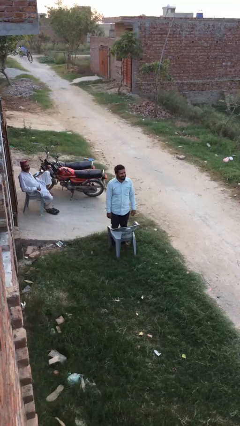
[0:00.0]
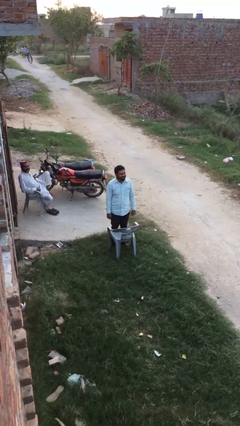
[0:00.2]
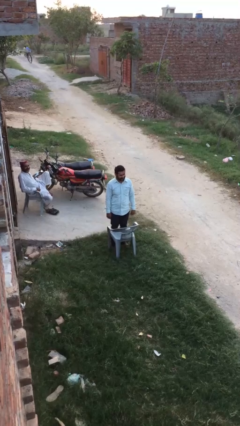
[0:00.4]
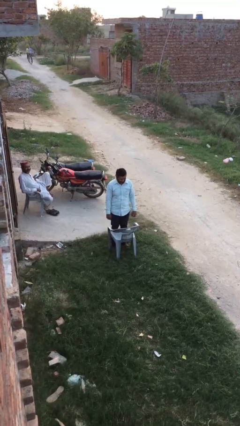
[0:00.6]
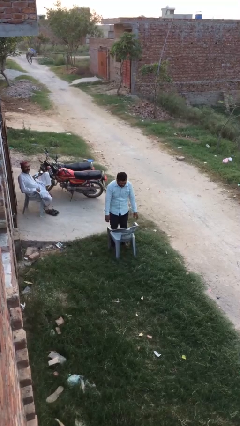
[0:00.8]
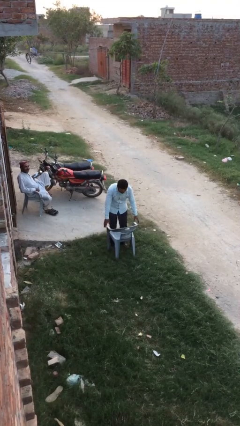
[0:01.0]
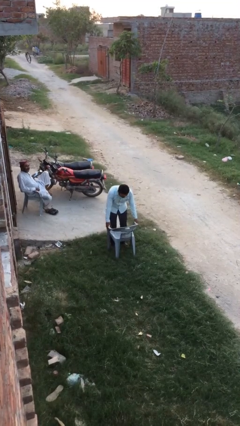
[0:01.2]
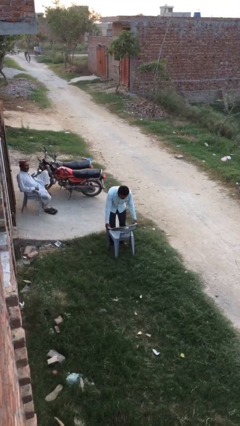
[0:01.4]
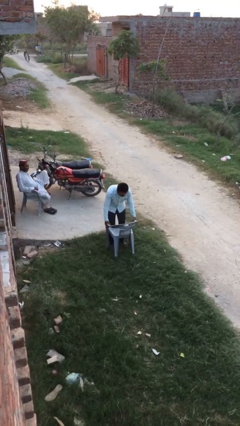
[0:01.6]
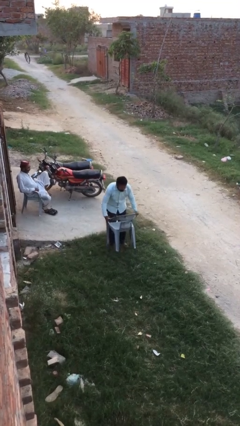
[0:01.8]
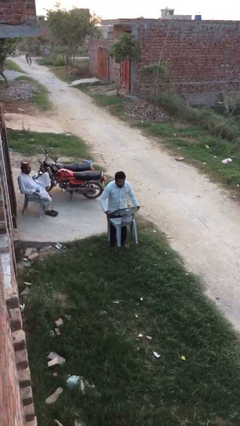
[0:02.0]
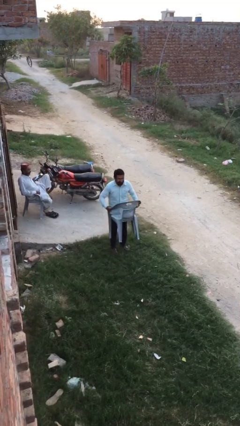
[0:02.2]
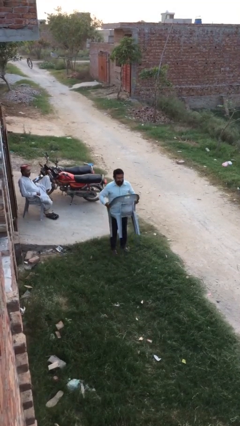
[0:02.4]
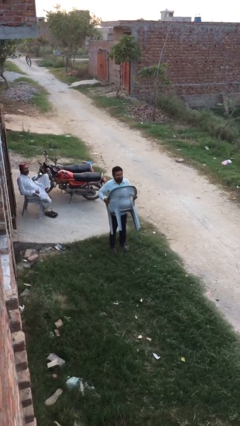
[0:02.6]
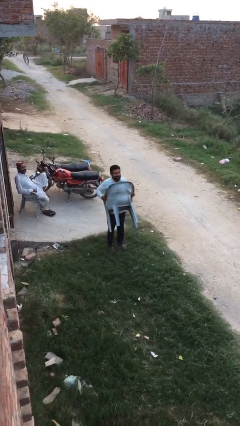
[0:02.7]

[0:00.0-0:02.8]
person picks up object from floor

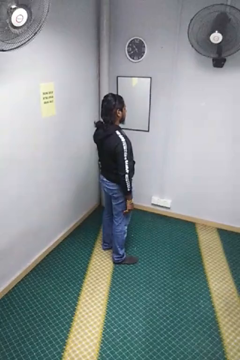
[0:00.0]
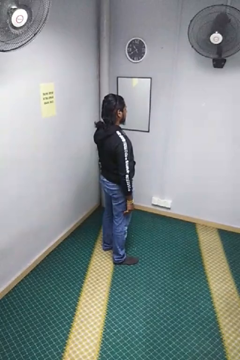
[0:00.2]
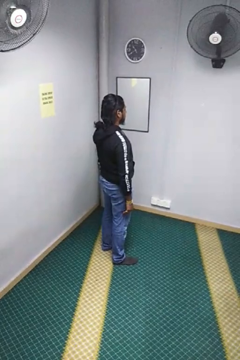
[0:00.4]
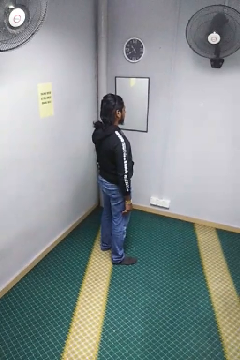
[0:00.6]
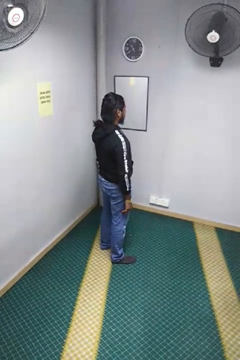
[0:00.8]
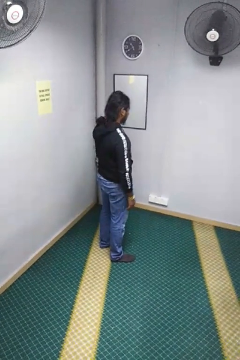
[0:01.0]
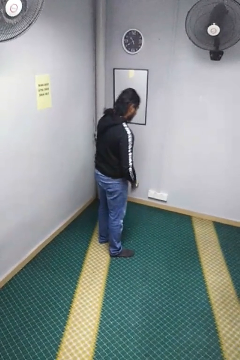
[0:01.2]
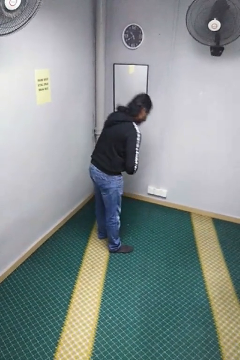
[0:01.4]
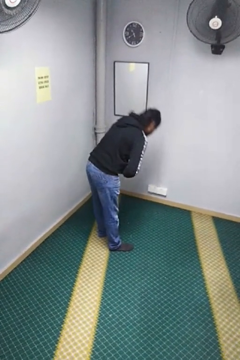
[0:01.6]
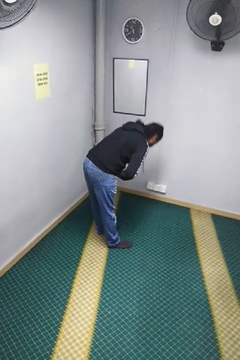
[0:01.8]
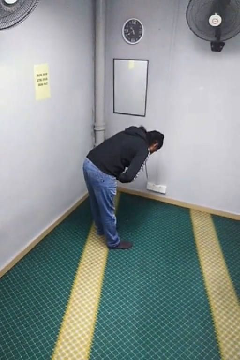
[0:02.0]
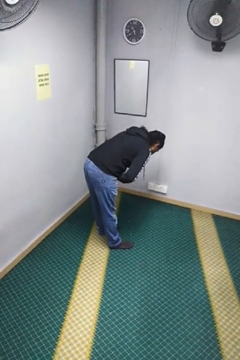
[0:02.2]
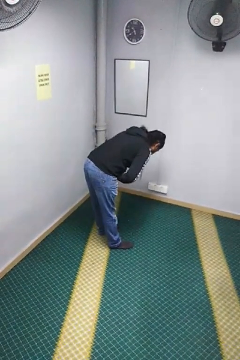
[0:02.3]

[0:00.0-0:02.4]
person bows

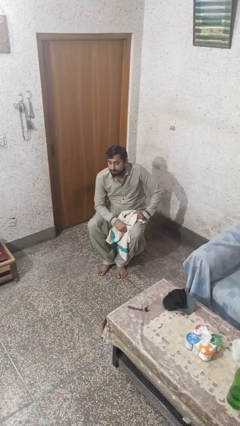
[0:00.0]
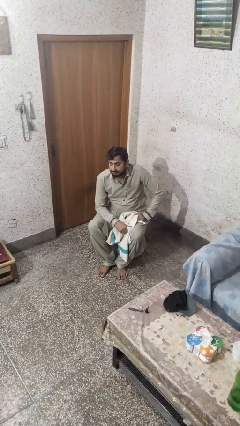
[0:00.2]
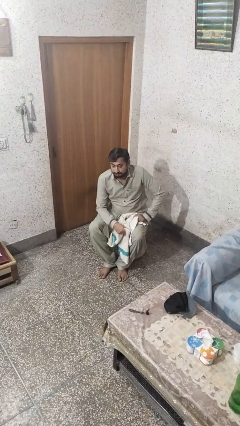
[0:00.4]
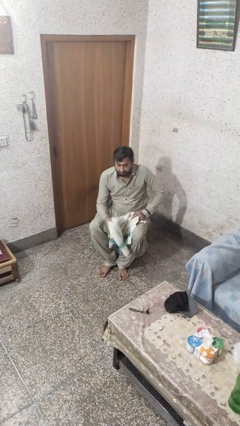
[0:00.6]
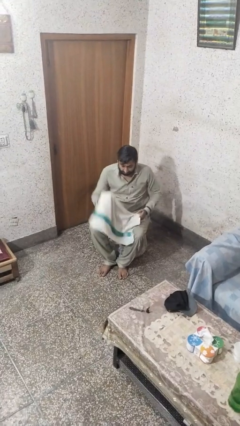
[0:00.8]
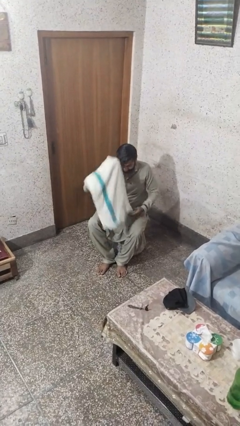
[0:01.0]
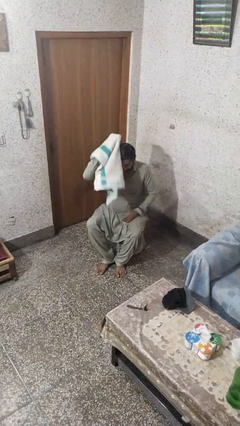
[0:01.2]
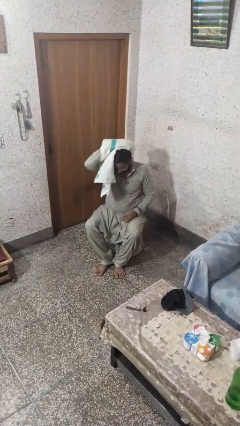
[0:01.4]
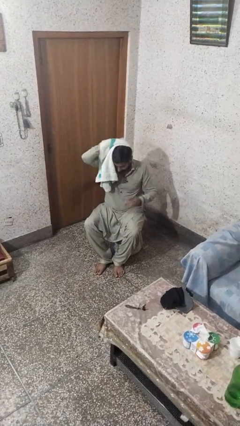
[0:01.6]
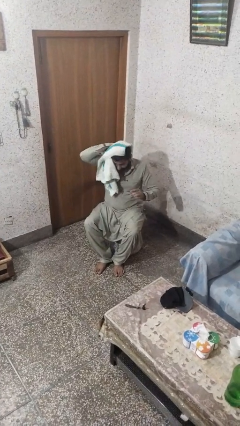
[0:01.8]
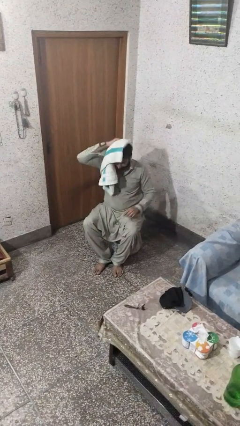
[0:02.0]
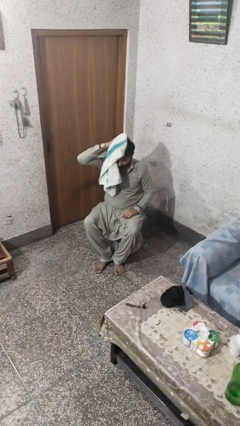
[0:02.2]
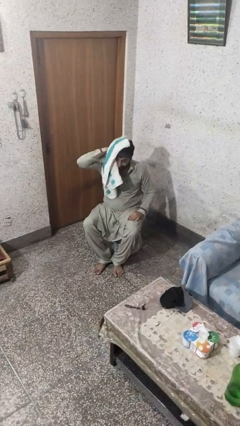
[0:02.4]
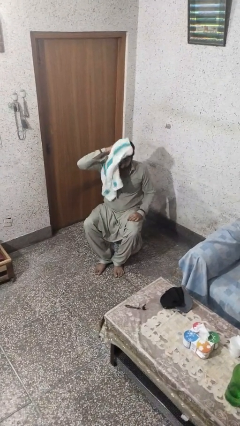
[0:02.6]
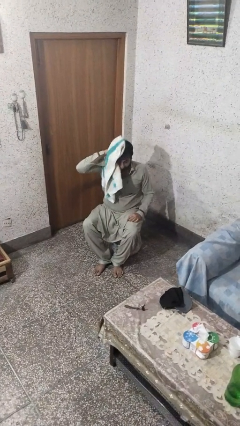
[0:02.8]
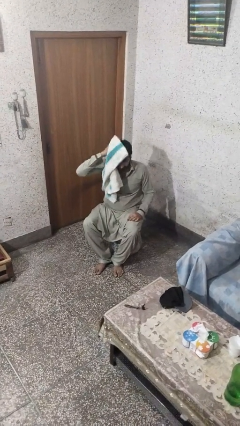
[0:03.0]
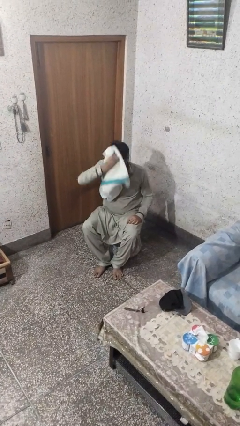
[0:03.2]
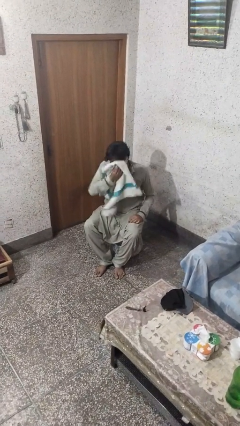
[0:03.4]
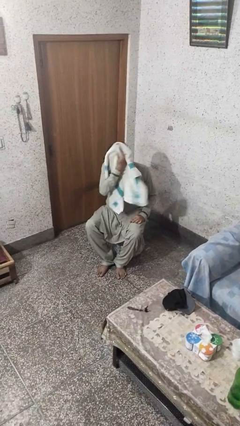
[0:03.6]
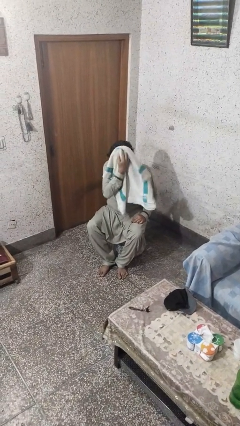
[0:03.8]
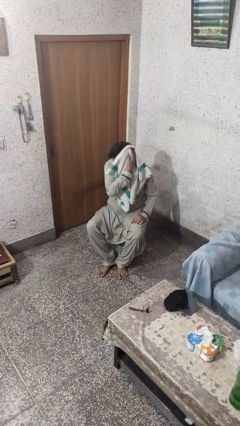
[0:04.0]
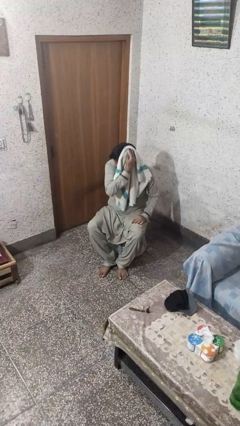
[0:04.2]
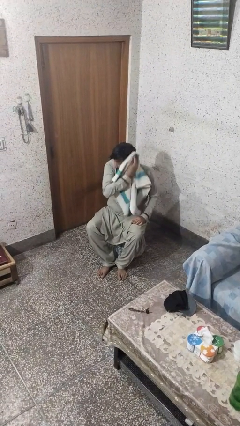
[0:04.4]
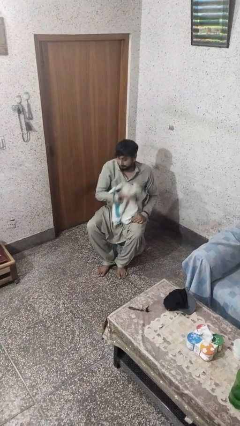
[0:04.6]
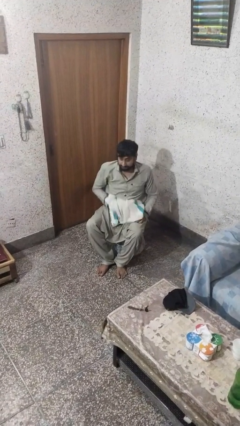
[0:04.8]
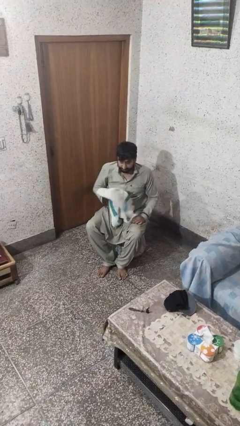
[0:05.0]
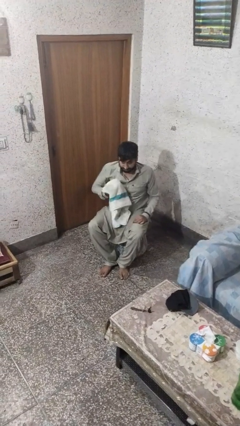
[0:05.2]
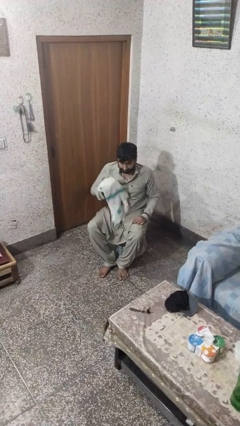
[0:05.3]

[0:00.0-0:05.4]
person dries hair with towel

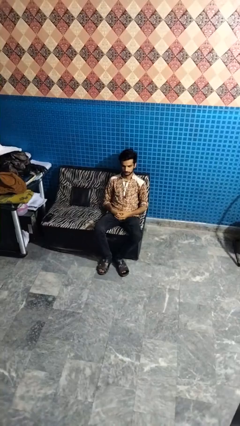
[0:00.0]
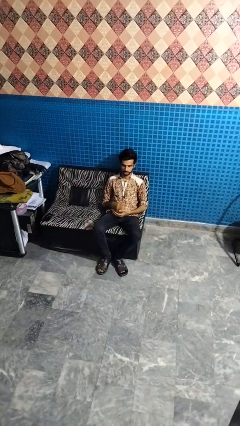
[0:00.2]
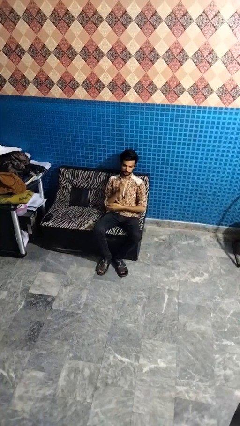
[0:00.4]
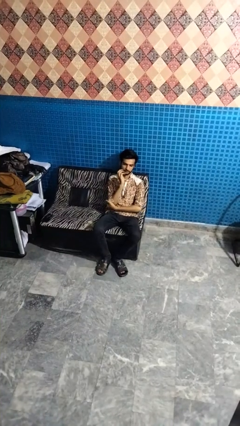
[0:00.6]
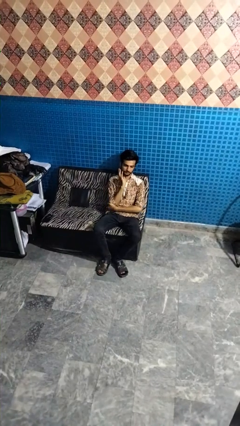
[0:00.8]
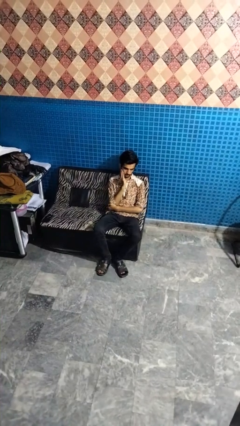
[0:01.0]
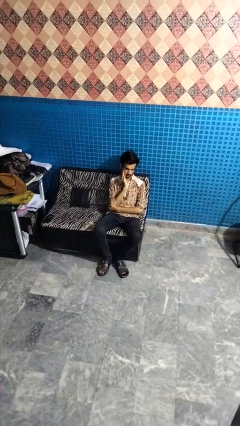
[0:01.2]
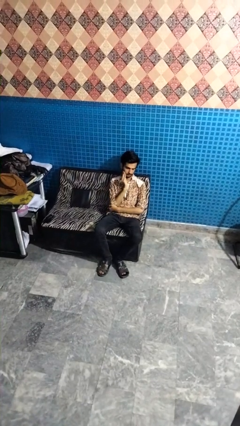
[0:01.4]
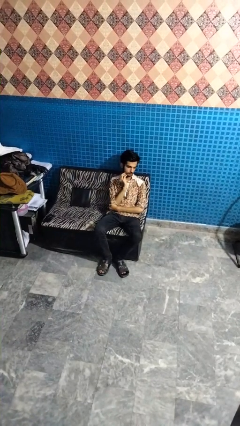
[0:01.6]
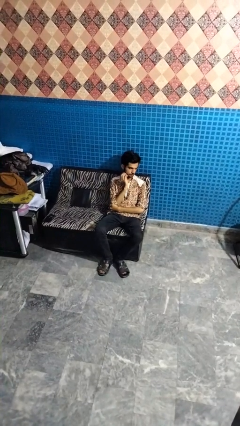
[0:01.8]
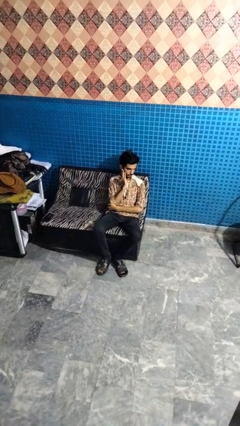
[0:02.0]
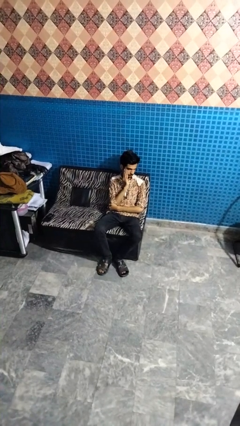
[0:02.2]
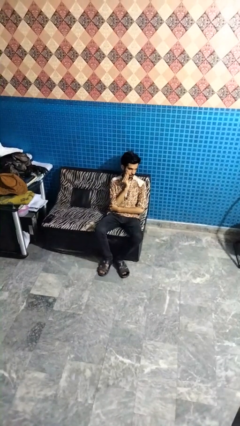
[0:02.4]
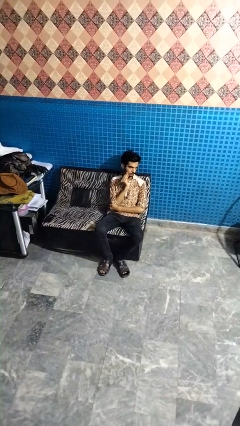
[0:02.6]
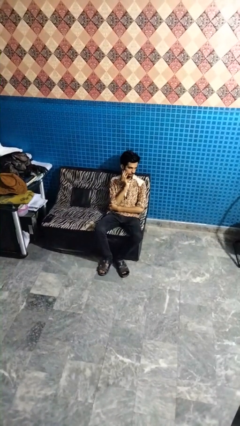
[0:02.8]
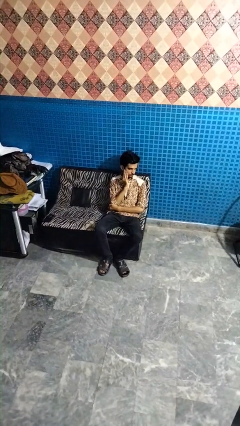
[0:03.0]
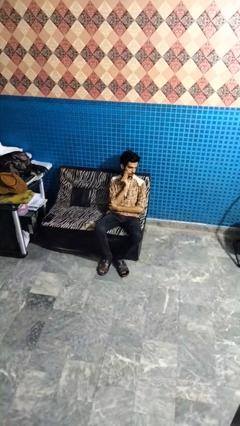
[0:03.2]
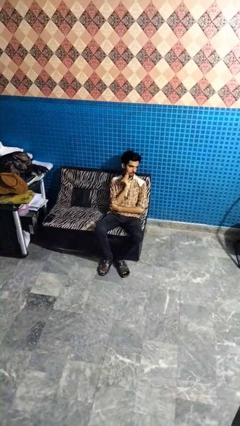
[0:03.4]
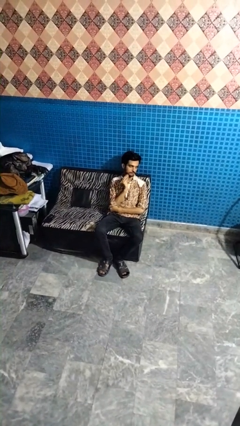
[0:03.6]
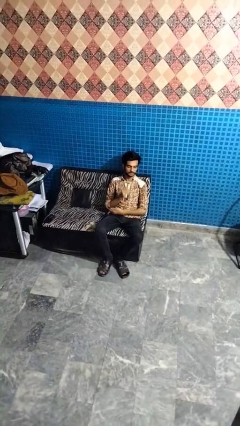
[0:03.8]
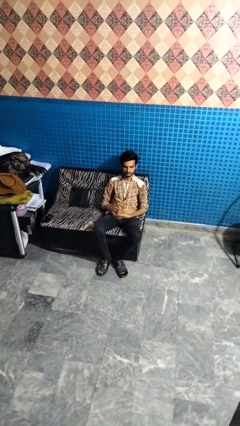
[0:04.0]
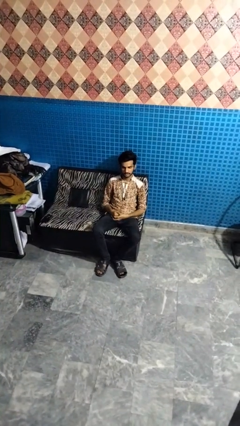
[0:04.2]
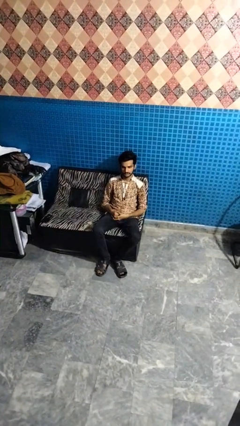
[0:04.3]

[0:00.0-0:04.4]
person strokes chin

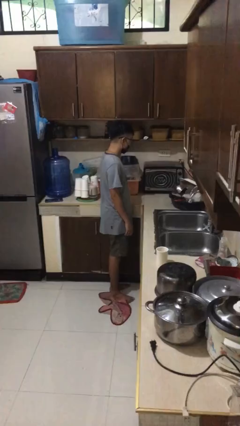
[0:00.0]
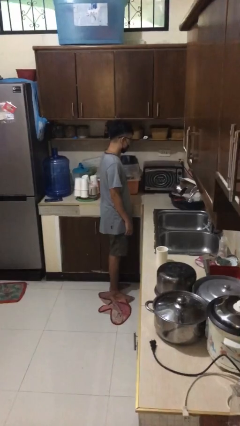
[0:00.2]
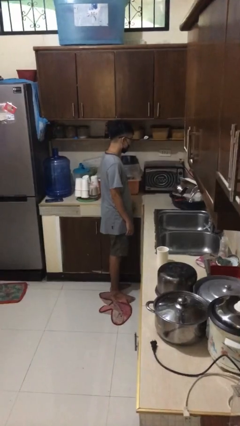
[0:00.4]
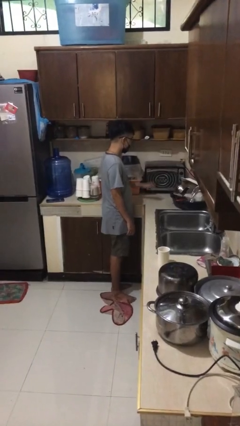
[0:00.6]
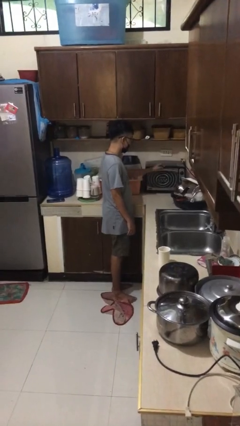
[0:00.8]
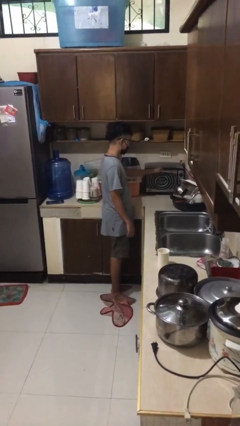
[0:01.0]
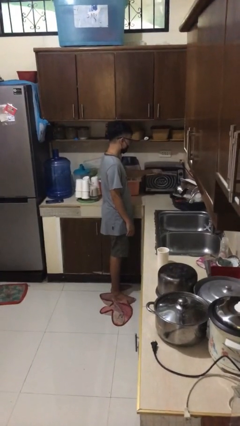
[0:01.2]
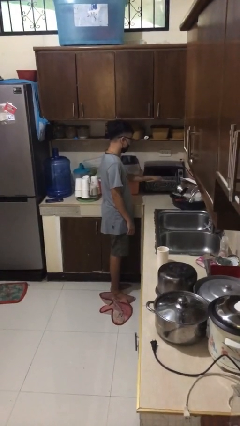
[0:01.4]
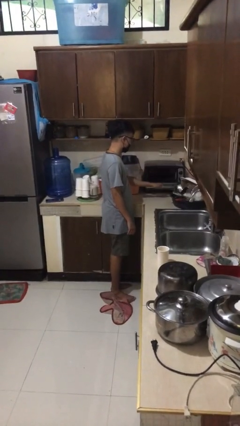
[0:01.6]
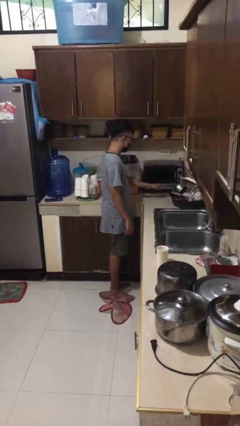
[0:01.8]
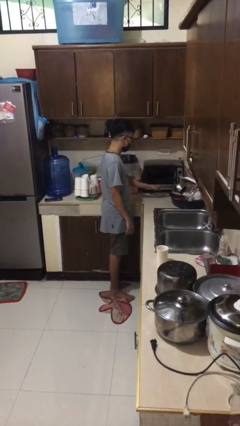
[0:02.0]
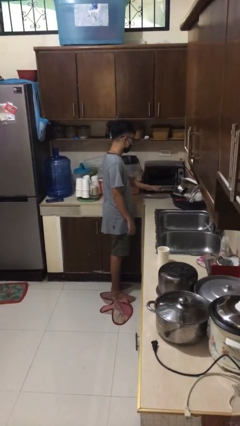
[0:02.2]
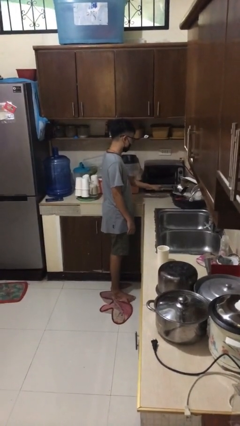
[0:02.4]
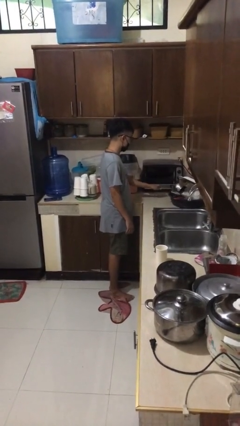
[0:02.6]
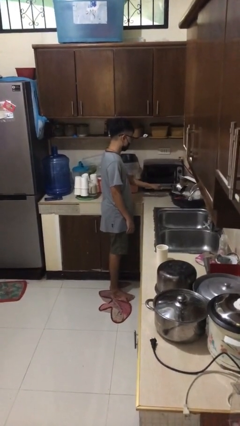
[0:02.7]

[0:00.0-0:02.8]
person opens microwave

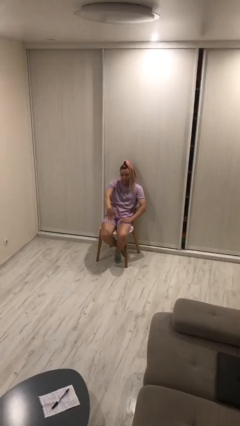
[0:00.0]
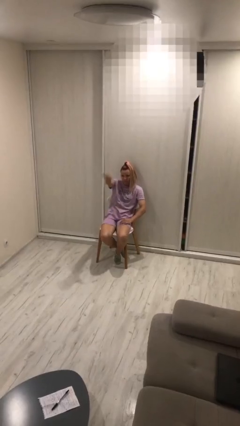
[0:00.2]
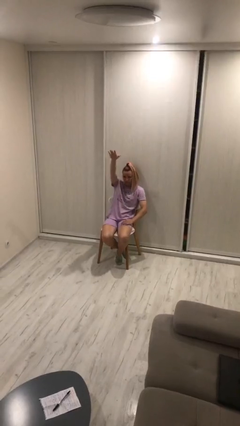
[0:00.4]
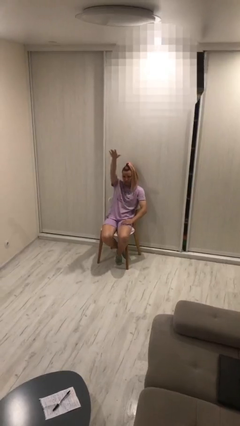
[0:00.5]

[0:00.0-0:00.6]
person gestures swipe up
